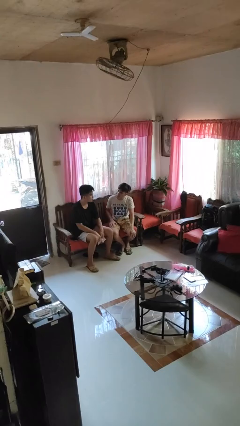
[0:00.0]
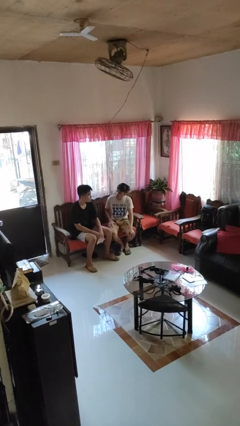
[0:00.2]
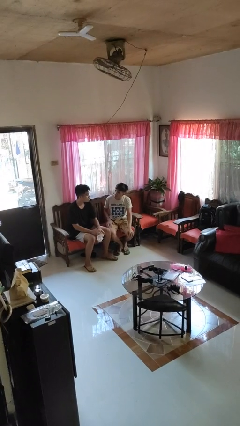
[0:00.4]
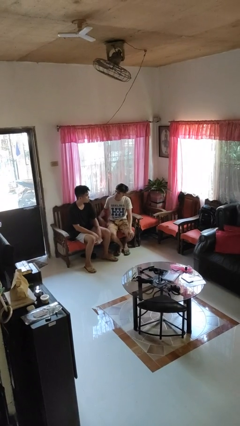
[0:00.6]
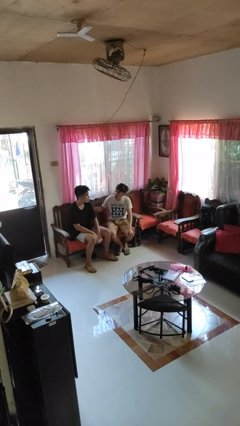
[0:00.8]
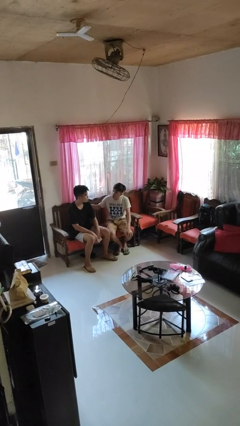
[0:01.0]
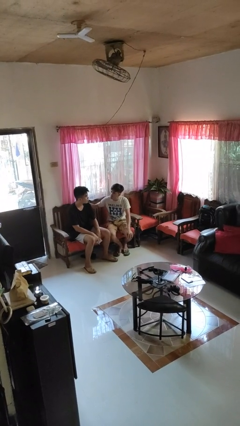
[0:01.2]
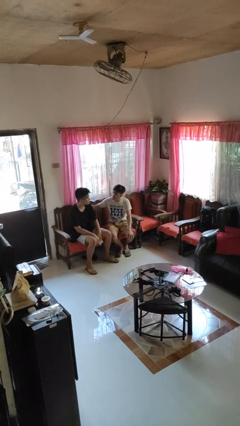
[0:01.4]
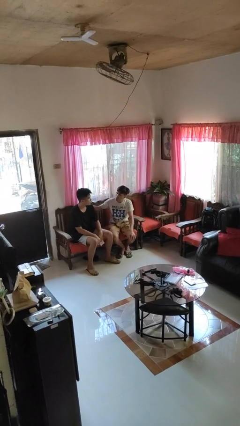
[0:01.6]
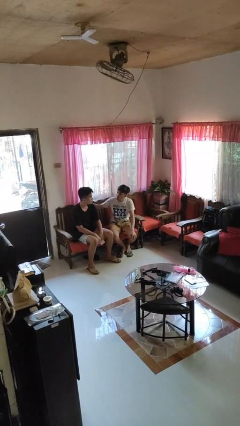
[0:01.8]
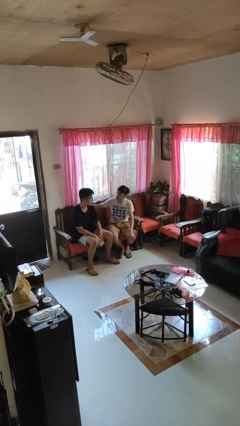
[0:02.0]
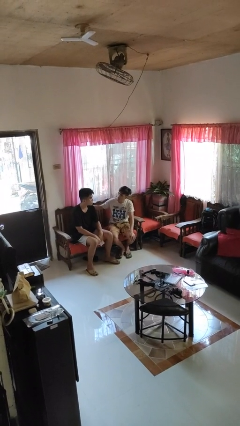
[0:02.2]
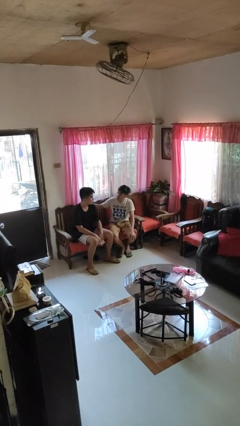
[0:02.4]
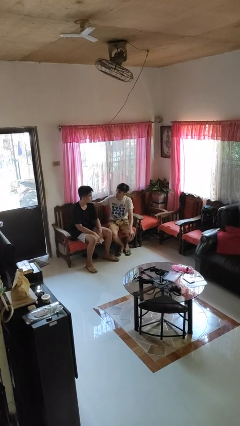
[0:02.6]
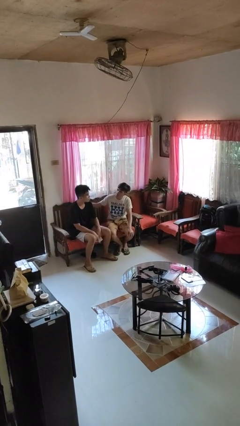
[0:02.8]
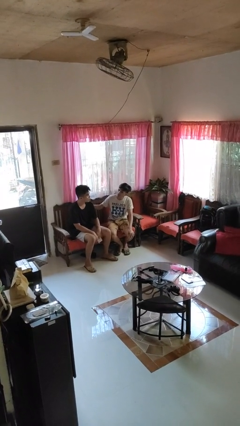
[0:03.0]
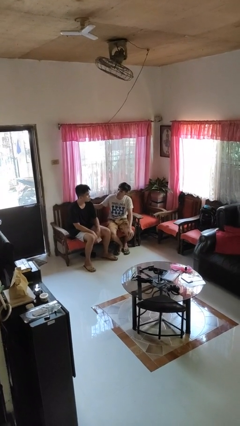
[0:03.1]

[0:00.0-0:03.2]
person touches back of person

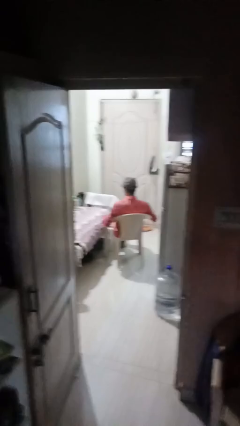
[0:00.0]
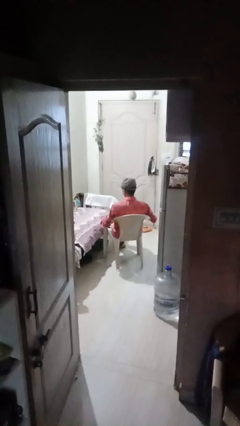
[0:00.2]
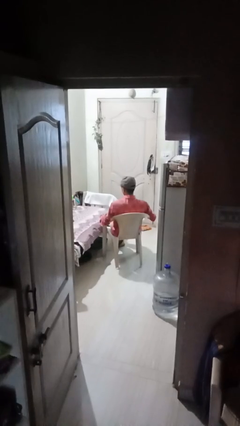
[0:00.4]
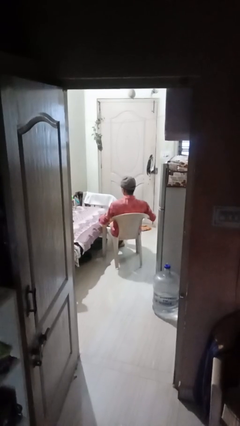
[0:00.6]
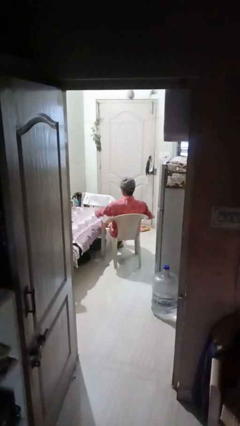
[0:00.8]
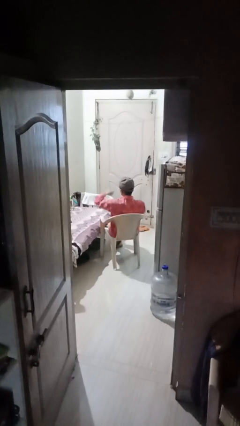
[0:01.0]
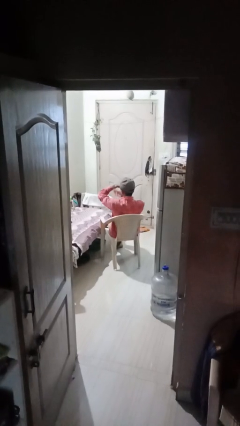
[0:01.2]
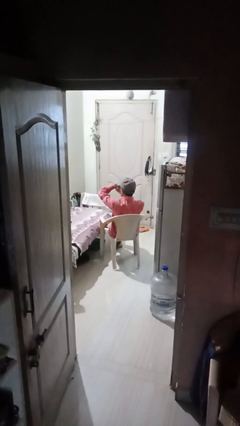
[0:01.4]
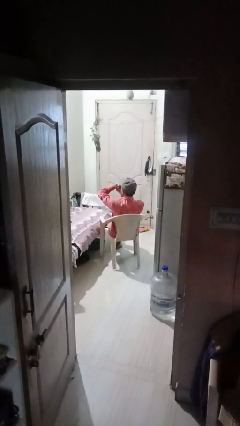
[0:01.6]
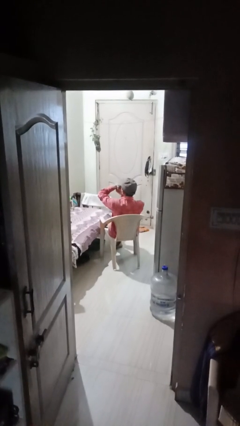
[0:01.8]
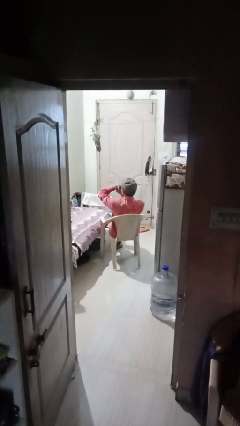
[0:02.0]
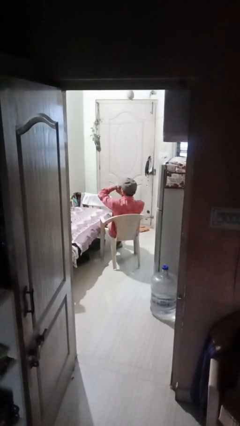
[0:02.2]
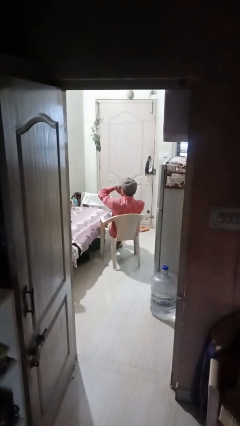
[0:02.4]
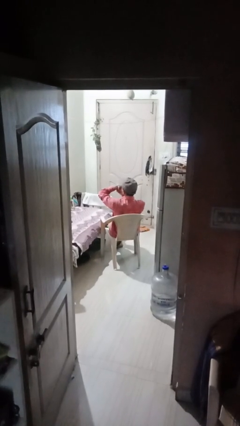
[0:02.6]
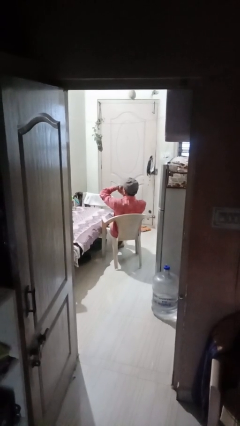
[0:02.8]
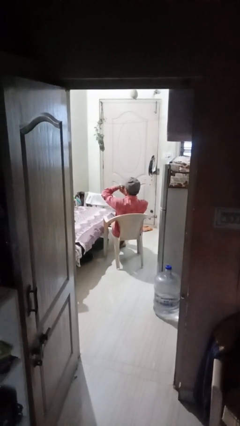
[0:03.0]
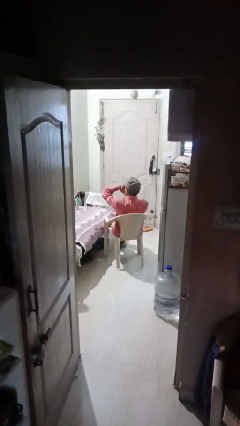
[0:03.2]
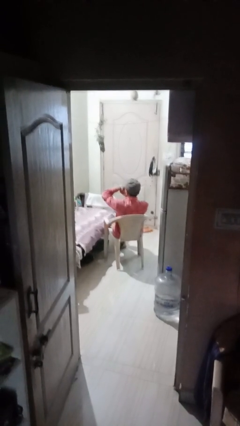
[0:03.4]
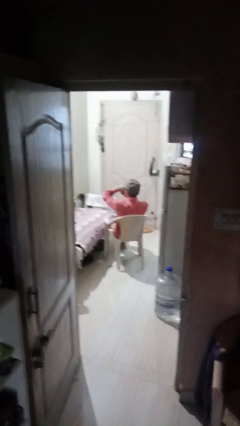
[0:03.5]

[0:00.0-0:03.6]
person looks at wristwatch

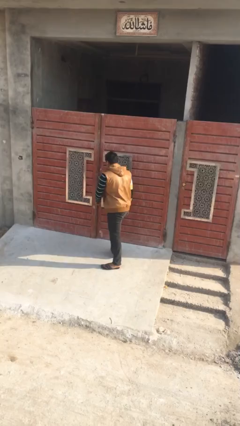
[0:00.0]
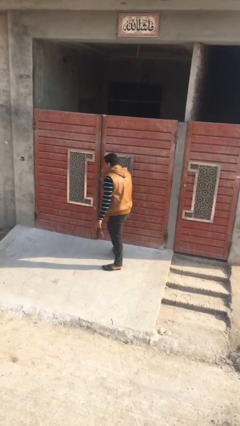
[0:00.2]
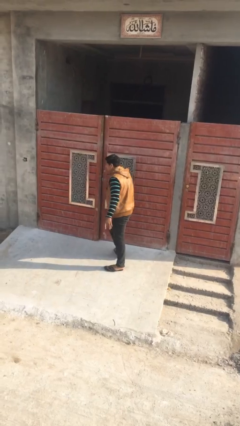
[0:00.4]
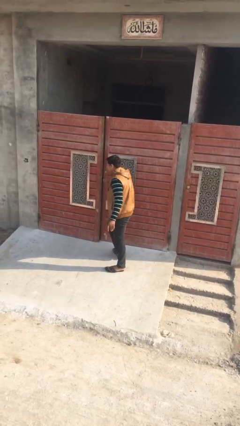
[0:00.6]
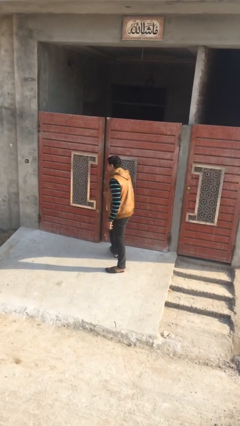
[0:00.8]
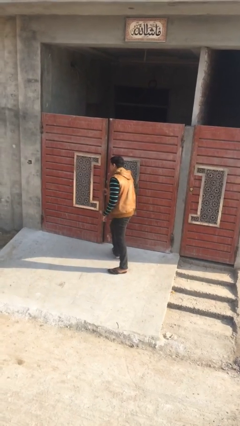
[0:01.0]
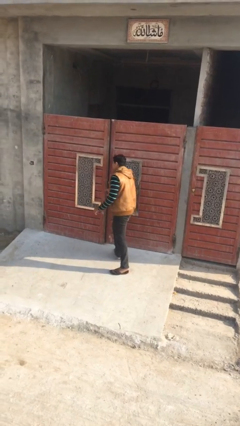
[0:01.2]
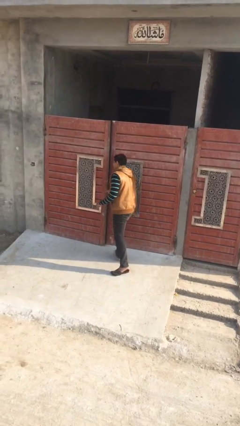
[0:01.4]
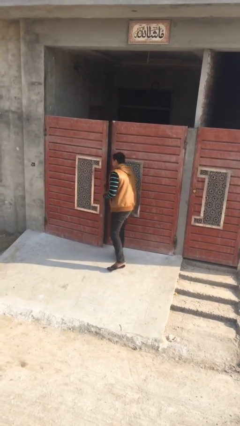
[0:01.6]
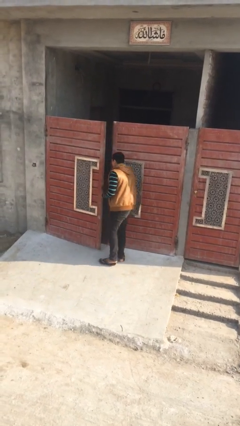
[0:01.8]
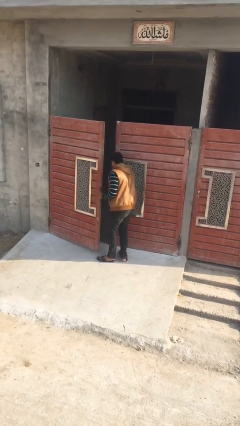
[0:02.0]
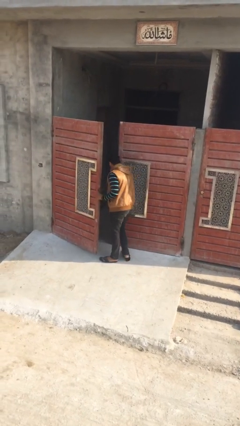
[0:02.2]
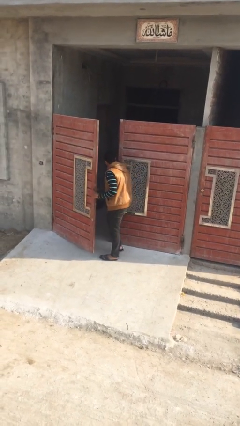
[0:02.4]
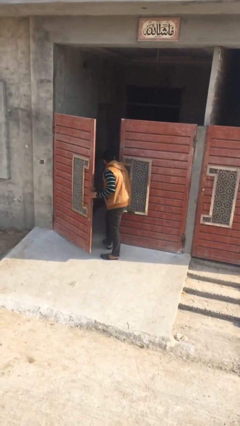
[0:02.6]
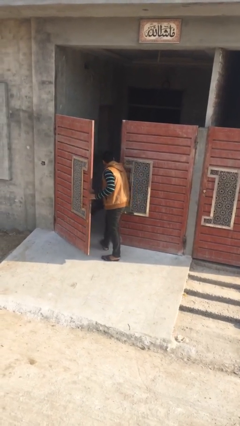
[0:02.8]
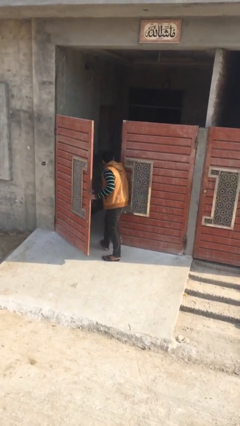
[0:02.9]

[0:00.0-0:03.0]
person opens facility door

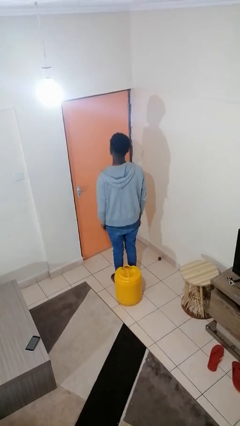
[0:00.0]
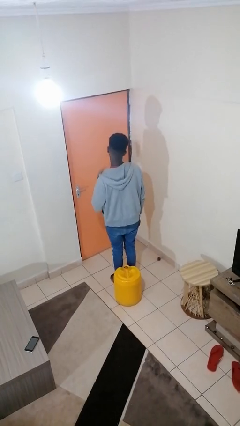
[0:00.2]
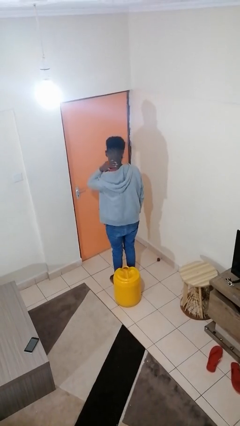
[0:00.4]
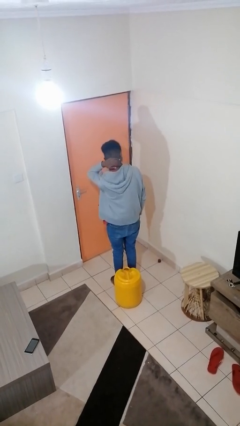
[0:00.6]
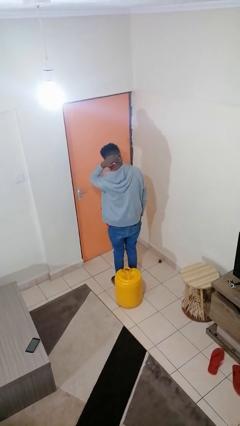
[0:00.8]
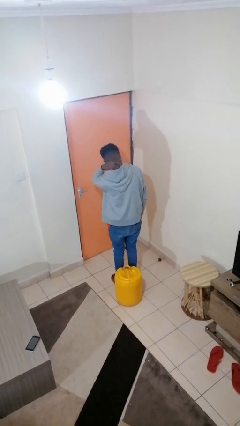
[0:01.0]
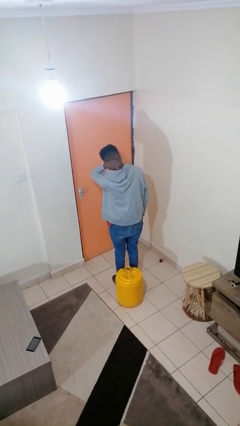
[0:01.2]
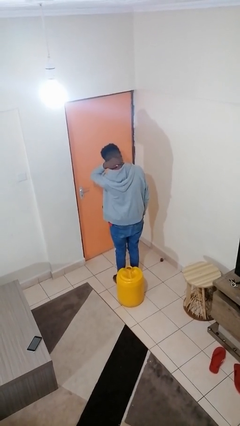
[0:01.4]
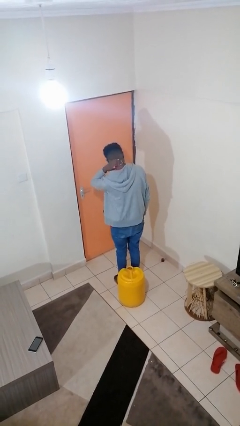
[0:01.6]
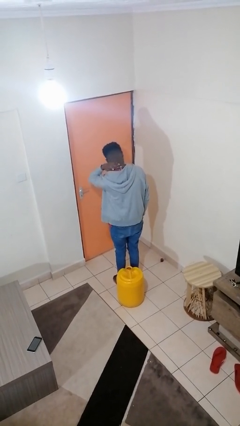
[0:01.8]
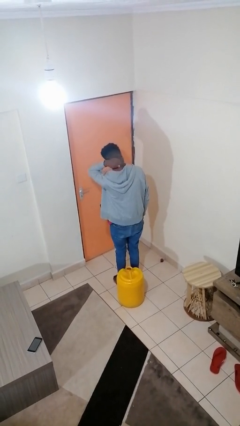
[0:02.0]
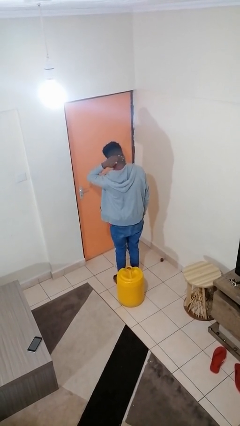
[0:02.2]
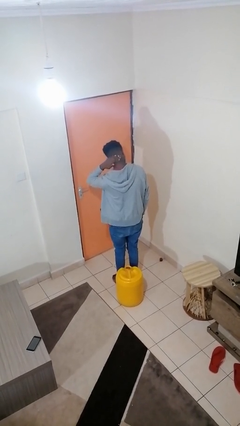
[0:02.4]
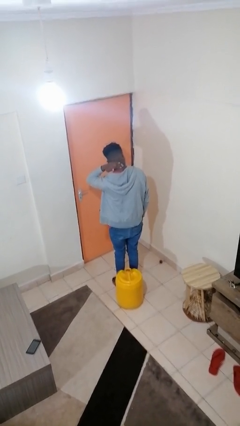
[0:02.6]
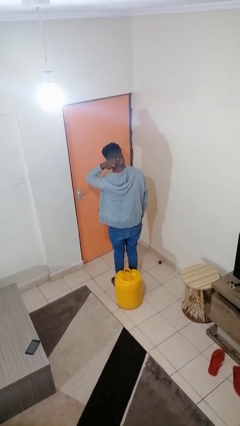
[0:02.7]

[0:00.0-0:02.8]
person rubs neck

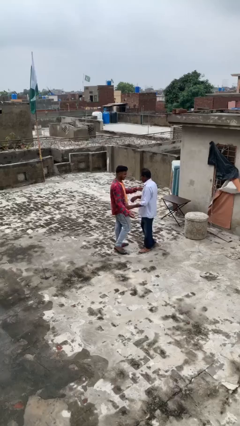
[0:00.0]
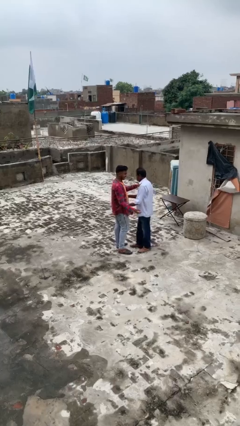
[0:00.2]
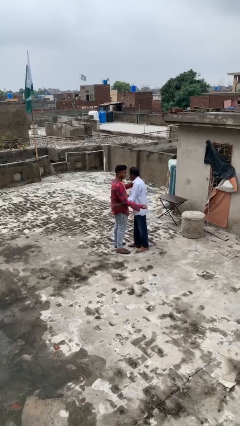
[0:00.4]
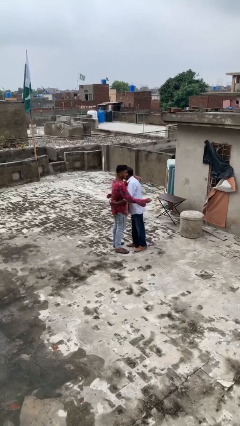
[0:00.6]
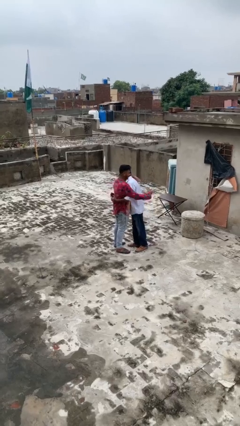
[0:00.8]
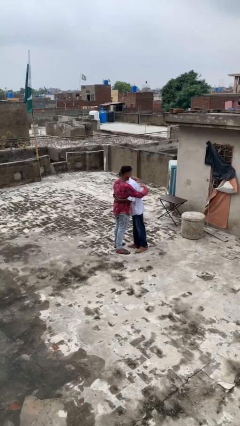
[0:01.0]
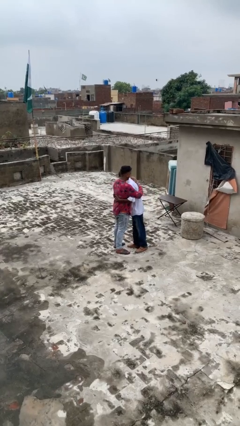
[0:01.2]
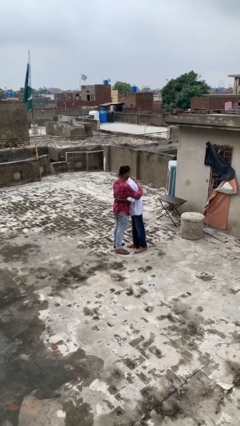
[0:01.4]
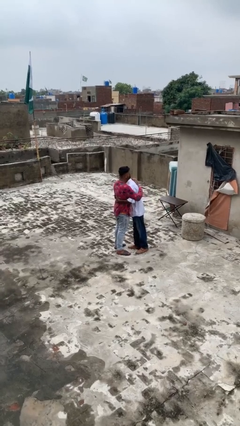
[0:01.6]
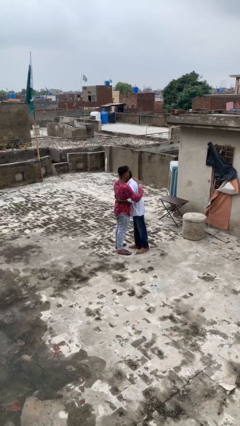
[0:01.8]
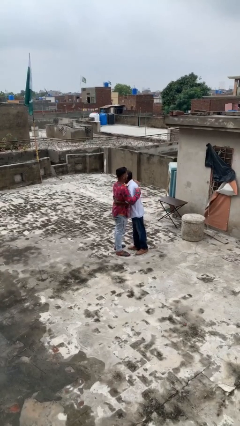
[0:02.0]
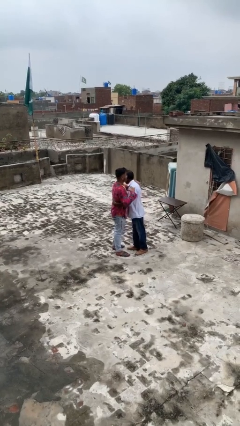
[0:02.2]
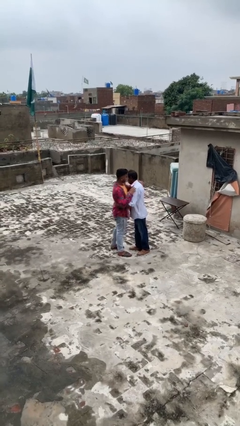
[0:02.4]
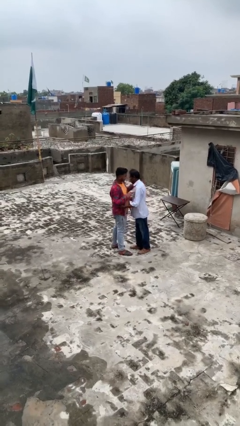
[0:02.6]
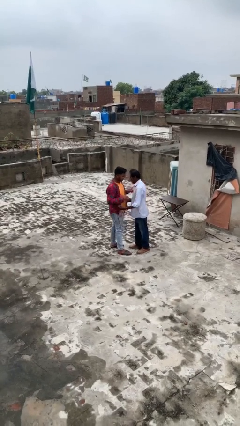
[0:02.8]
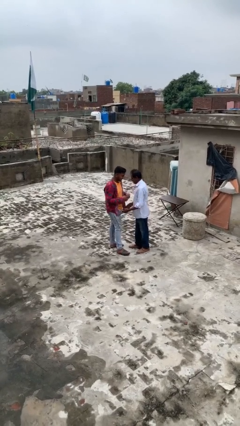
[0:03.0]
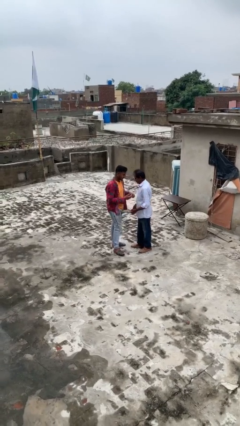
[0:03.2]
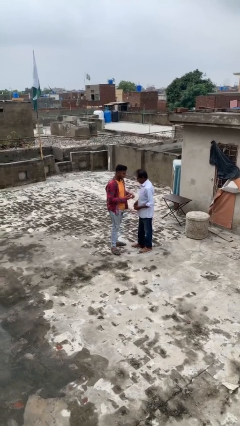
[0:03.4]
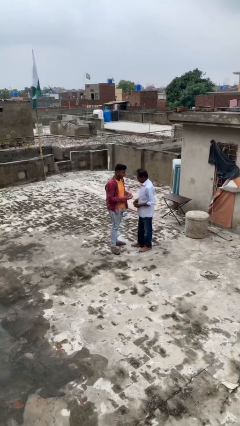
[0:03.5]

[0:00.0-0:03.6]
person embraces person

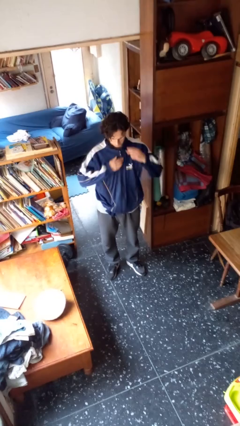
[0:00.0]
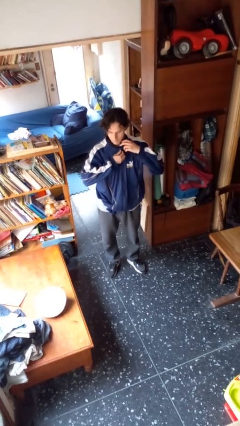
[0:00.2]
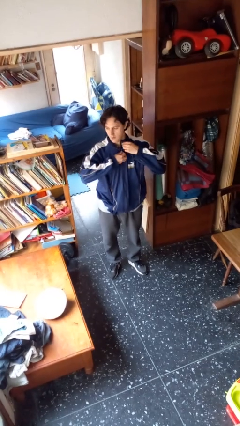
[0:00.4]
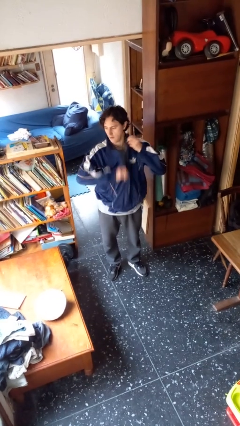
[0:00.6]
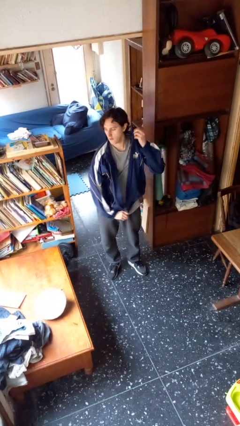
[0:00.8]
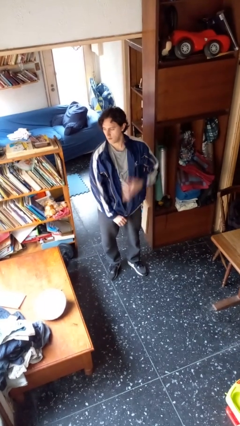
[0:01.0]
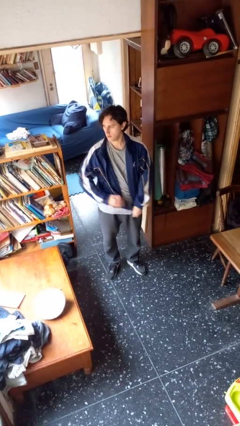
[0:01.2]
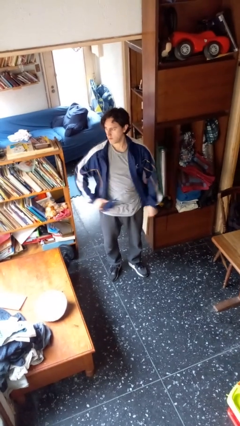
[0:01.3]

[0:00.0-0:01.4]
person unzips jacket
